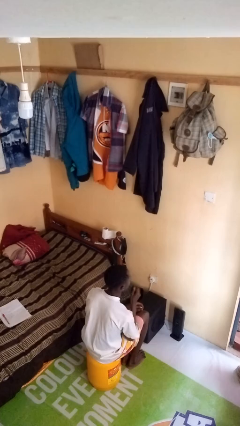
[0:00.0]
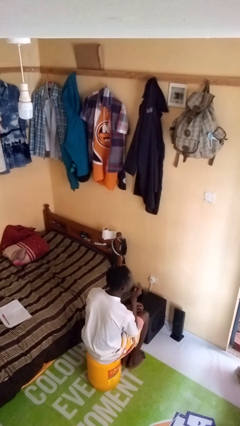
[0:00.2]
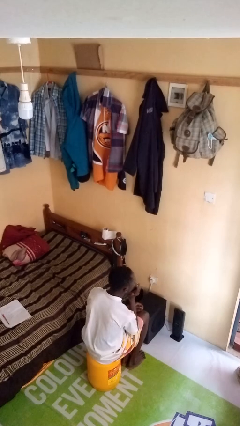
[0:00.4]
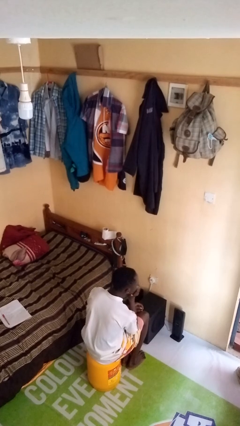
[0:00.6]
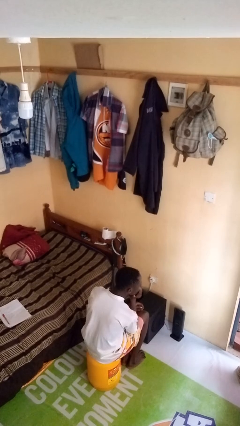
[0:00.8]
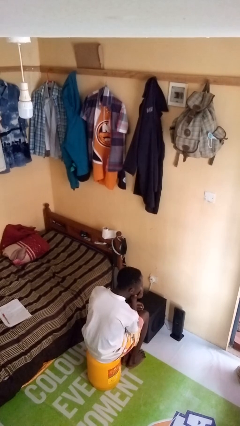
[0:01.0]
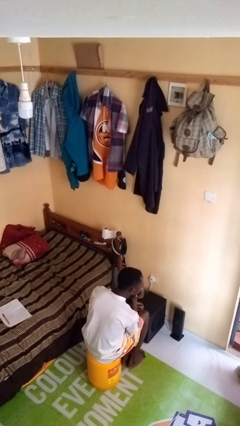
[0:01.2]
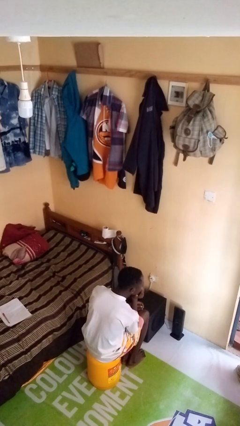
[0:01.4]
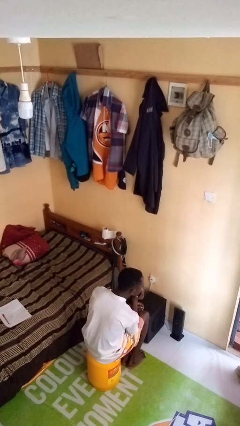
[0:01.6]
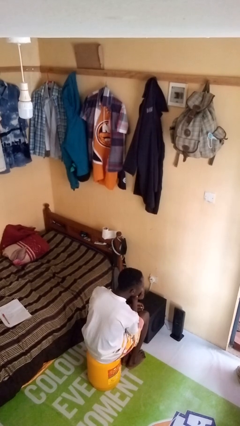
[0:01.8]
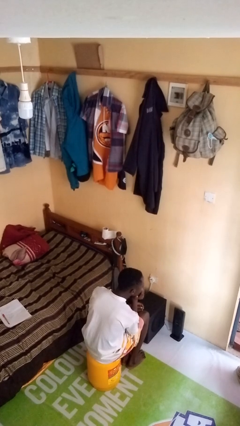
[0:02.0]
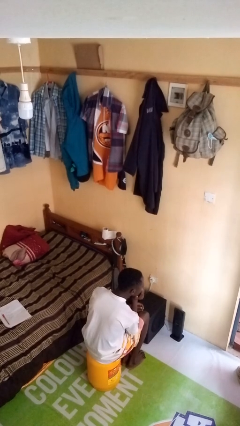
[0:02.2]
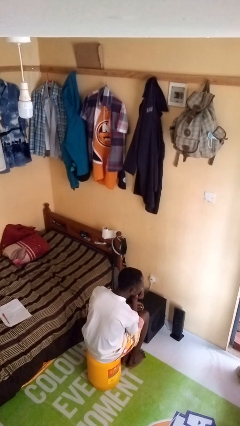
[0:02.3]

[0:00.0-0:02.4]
person strokes chin

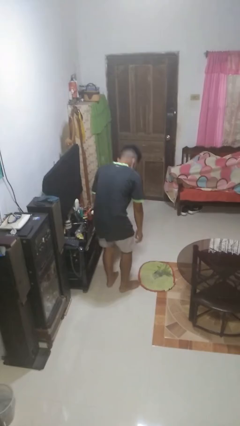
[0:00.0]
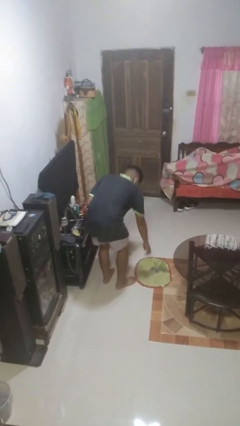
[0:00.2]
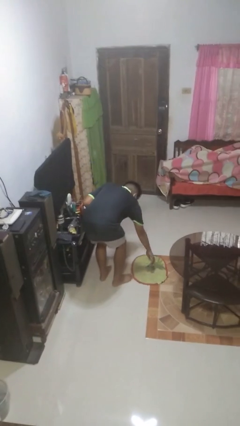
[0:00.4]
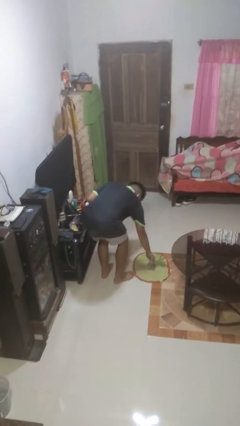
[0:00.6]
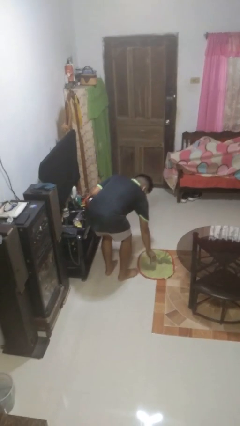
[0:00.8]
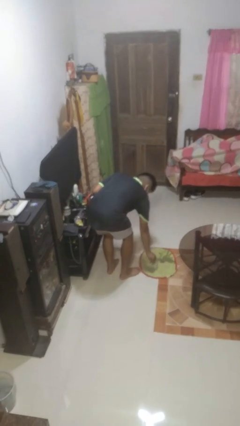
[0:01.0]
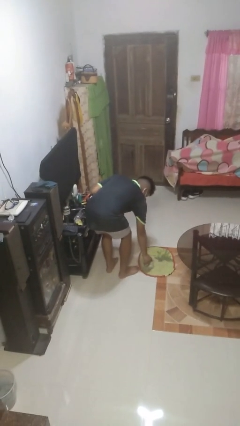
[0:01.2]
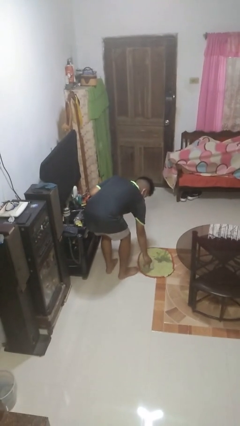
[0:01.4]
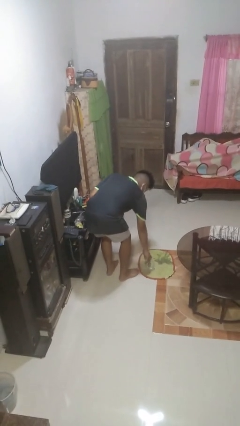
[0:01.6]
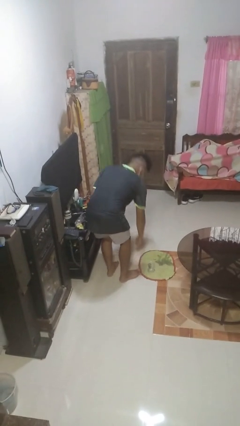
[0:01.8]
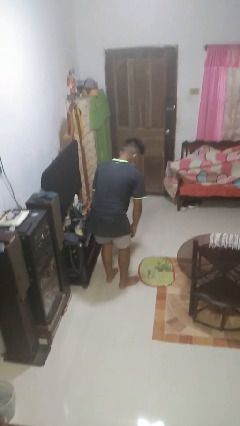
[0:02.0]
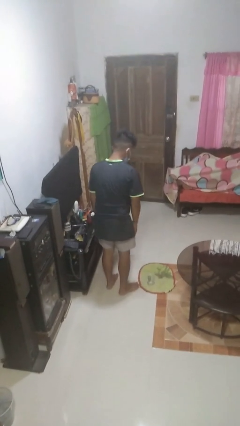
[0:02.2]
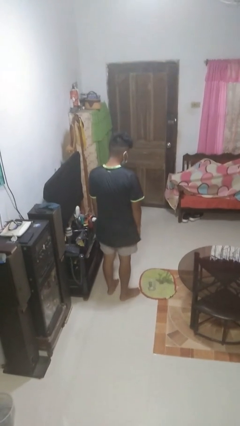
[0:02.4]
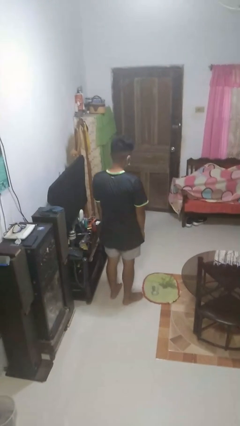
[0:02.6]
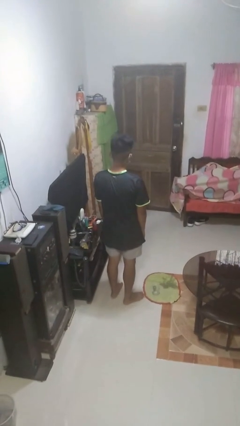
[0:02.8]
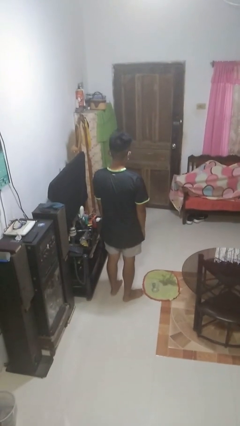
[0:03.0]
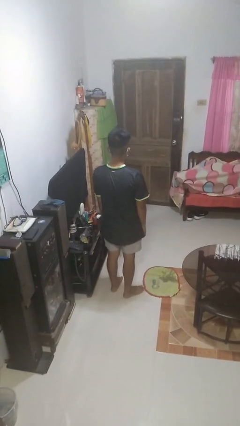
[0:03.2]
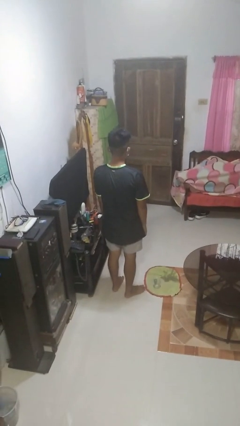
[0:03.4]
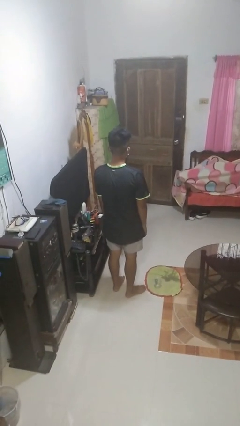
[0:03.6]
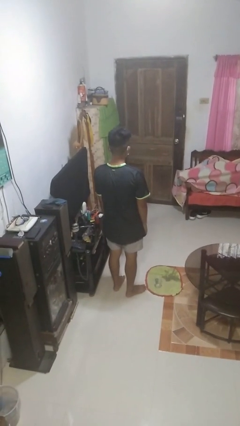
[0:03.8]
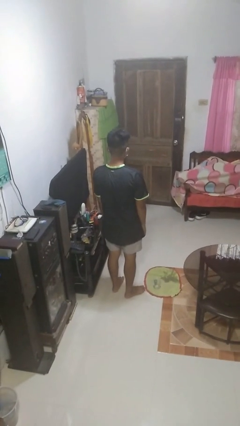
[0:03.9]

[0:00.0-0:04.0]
person sets upright glass

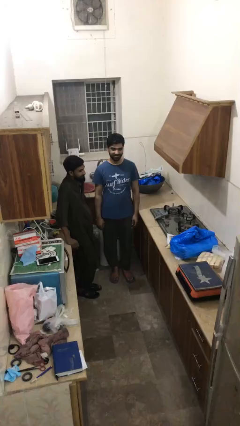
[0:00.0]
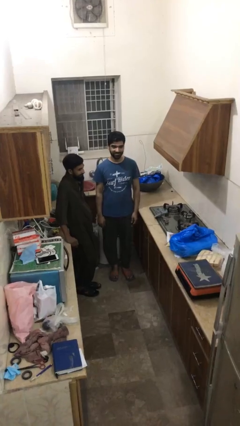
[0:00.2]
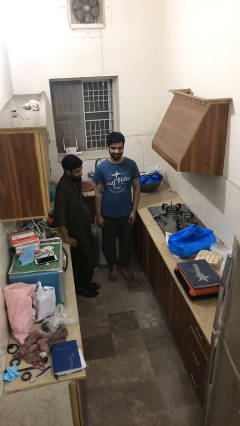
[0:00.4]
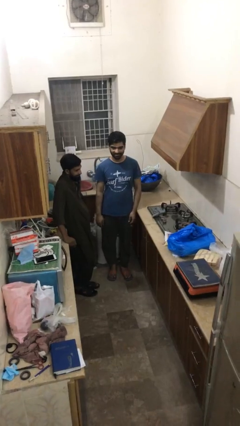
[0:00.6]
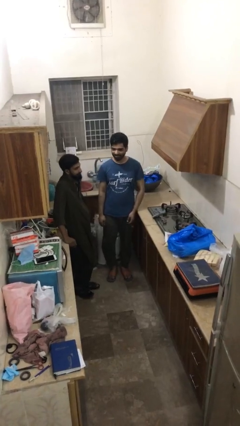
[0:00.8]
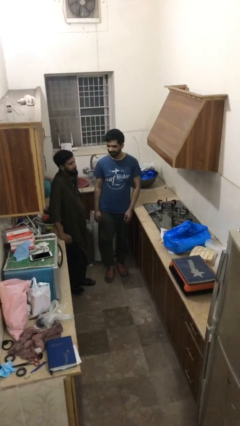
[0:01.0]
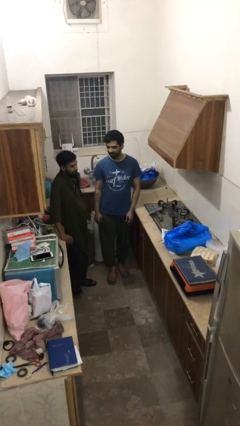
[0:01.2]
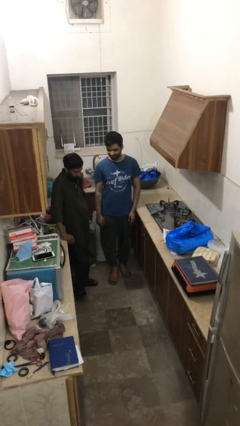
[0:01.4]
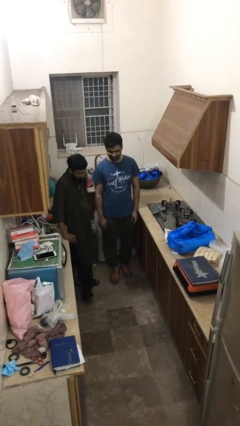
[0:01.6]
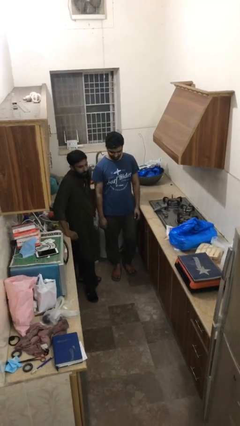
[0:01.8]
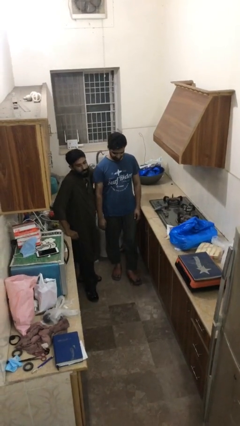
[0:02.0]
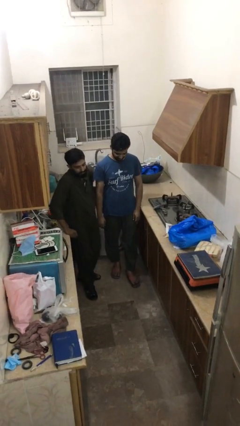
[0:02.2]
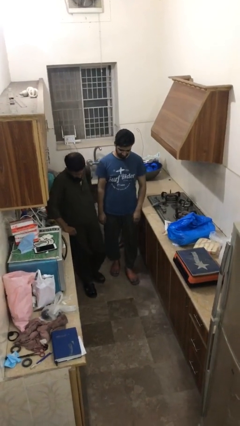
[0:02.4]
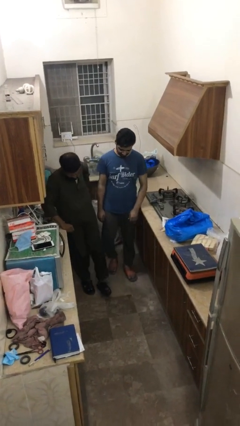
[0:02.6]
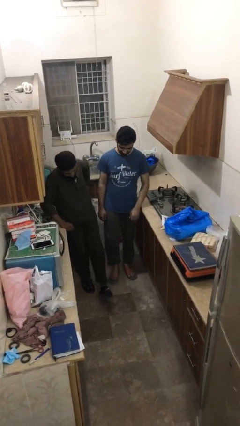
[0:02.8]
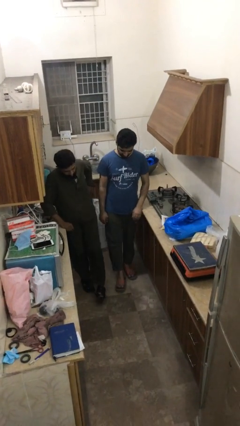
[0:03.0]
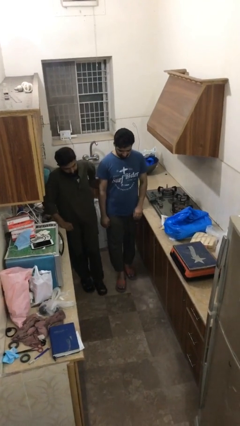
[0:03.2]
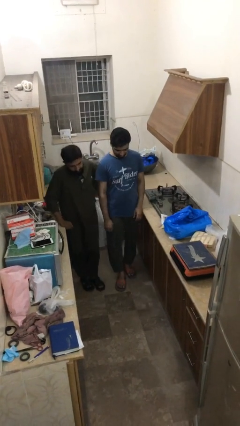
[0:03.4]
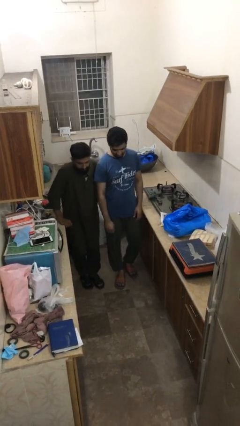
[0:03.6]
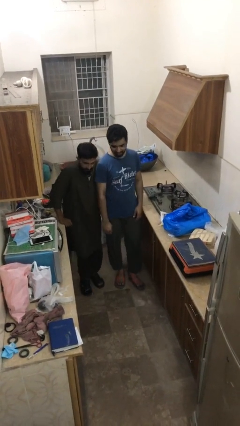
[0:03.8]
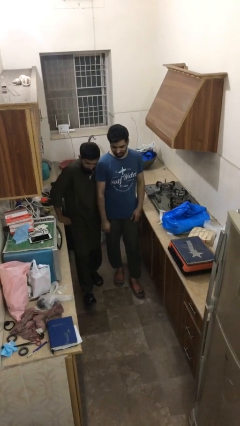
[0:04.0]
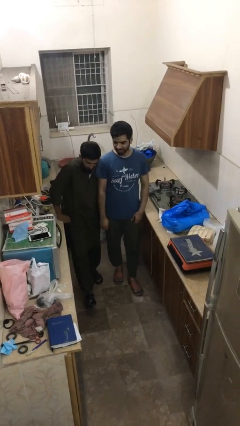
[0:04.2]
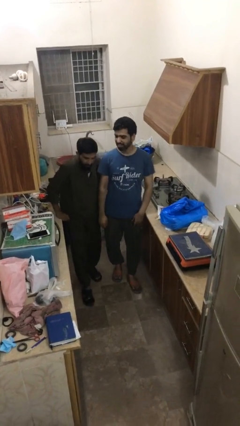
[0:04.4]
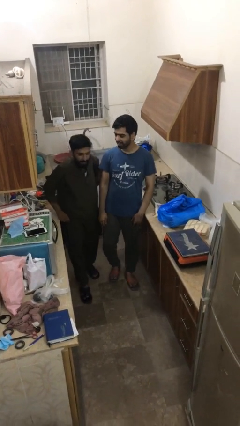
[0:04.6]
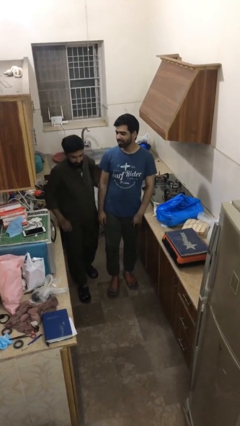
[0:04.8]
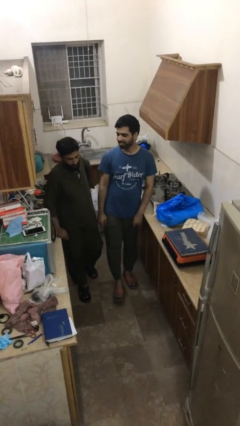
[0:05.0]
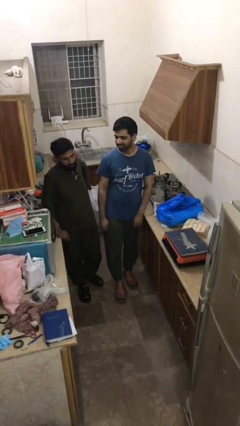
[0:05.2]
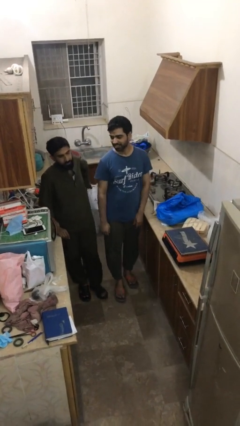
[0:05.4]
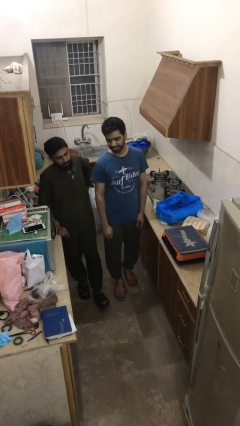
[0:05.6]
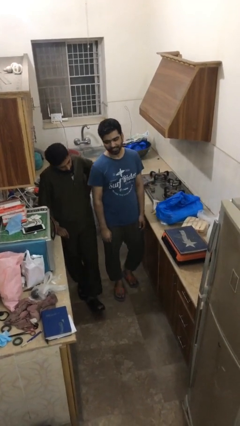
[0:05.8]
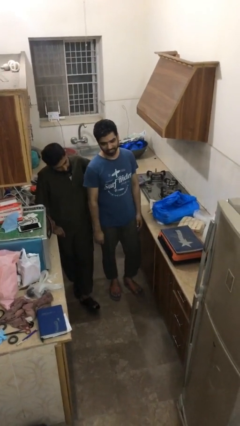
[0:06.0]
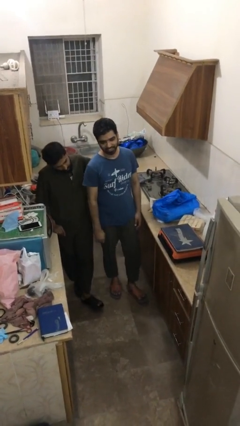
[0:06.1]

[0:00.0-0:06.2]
person talks to person

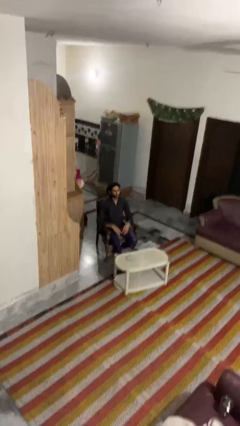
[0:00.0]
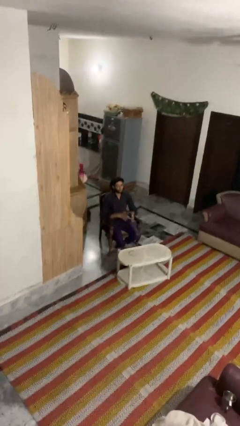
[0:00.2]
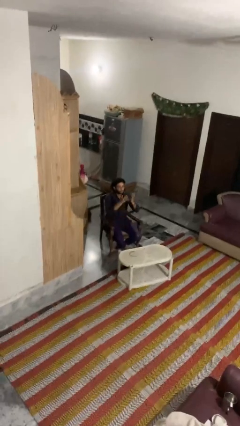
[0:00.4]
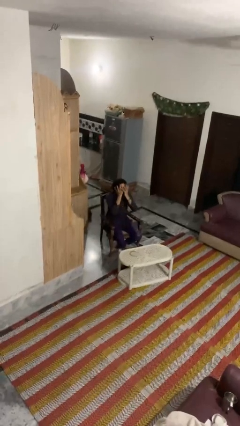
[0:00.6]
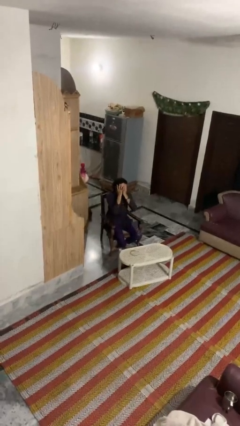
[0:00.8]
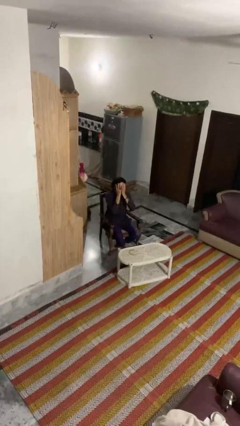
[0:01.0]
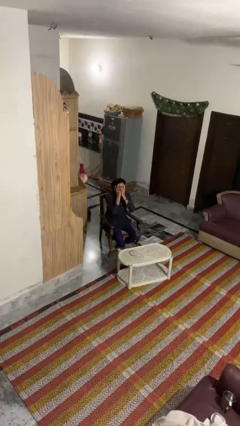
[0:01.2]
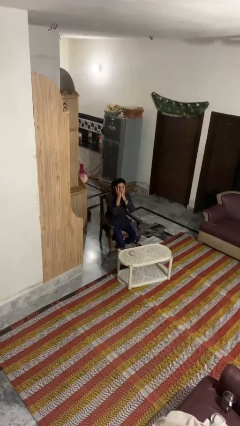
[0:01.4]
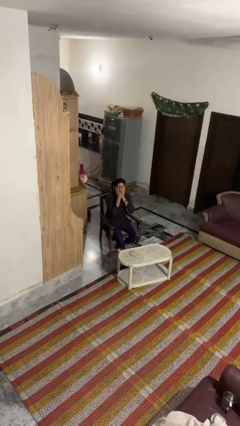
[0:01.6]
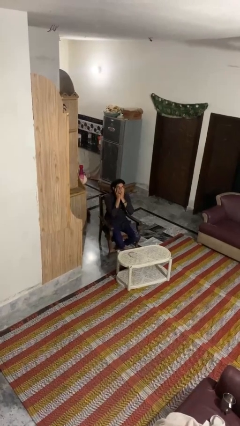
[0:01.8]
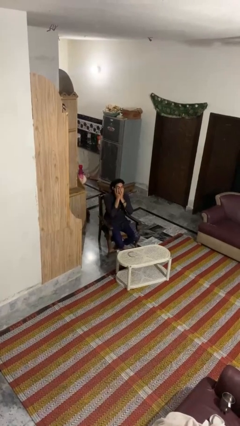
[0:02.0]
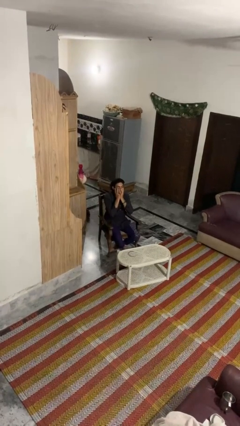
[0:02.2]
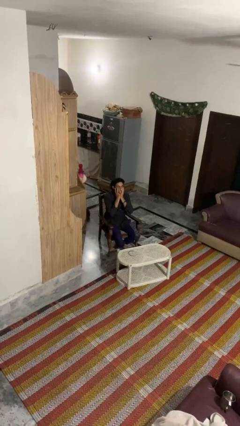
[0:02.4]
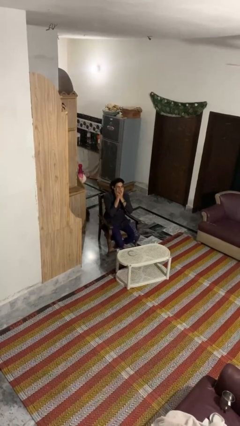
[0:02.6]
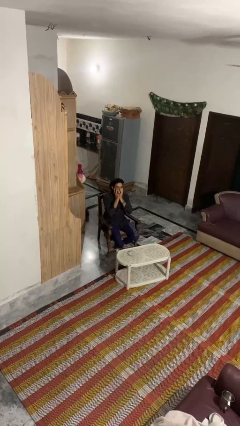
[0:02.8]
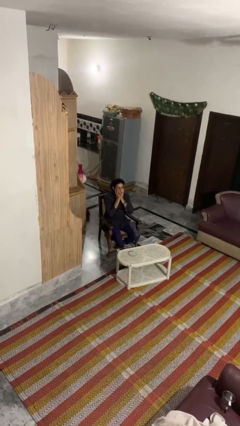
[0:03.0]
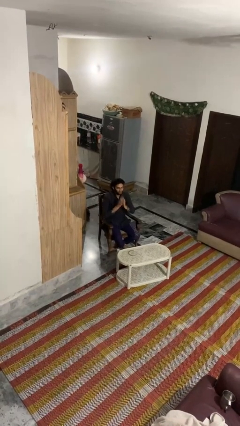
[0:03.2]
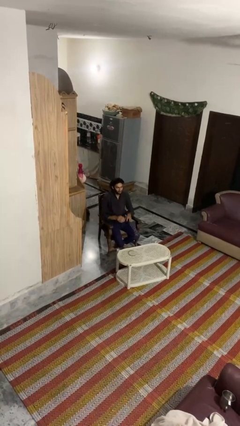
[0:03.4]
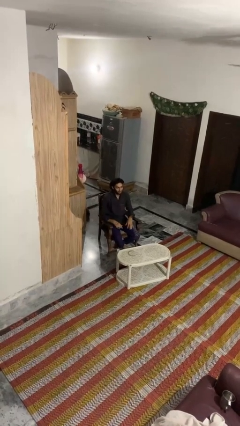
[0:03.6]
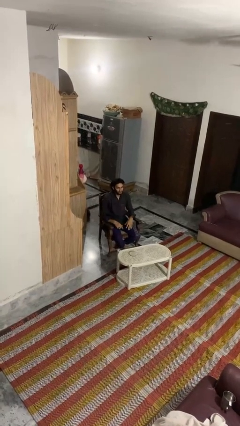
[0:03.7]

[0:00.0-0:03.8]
person covers face with hands

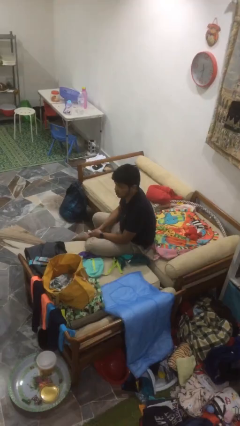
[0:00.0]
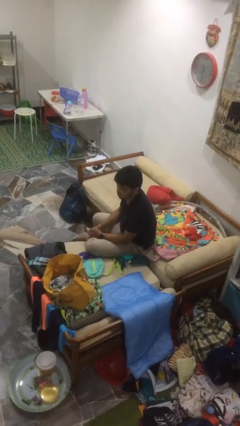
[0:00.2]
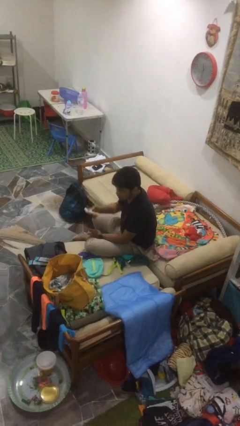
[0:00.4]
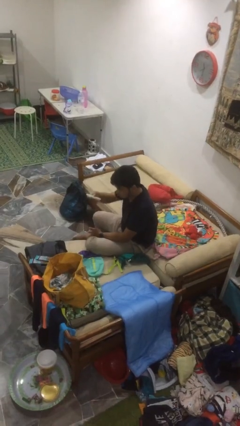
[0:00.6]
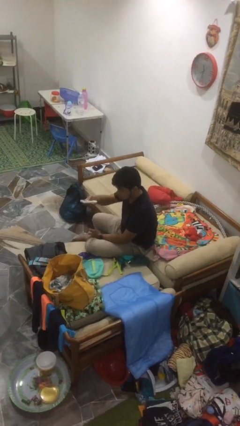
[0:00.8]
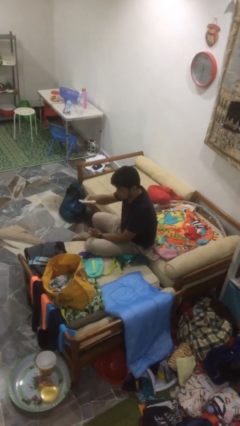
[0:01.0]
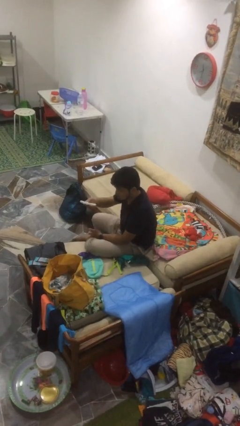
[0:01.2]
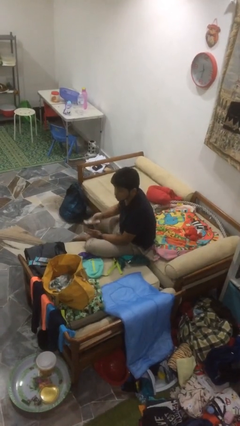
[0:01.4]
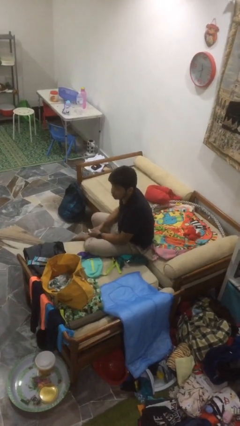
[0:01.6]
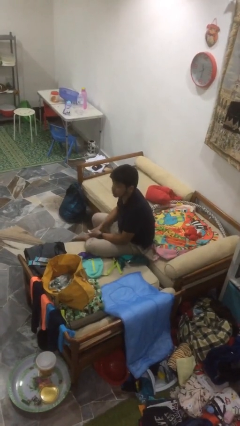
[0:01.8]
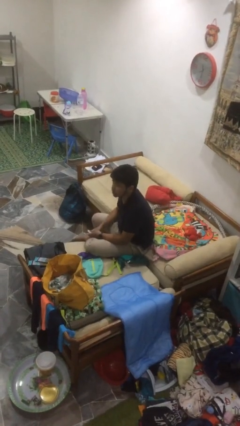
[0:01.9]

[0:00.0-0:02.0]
person uses television remote
